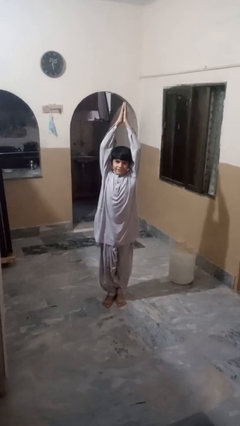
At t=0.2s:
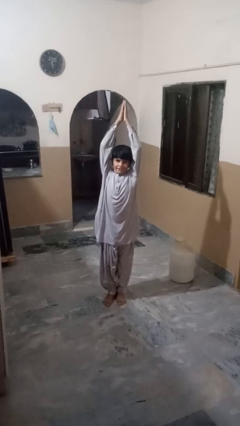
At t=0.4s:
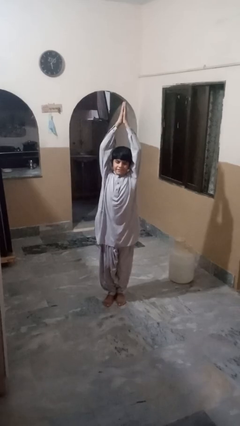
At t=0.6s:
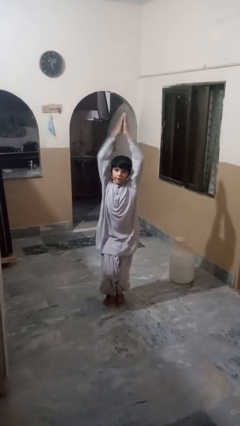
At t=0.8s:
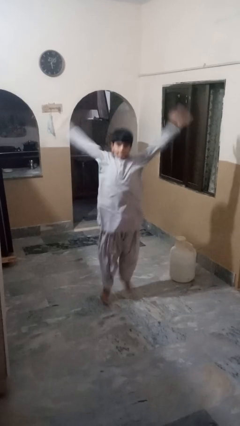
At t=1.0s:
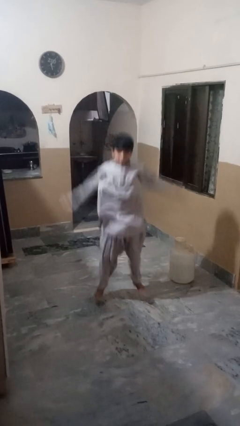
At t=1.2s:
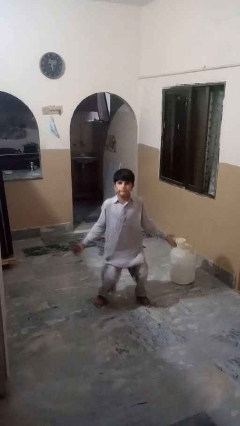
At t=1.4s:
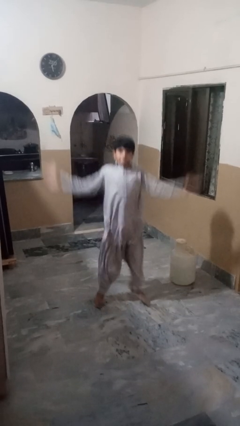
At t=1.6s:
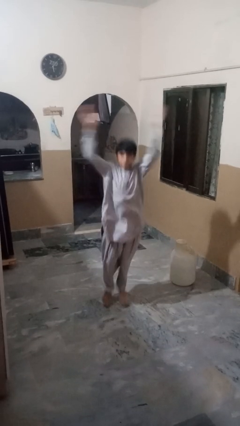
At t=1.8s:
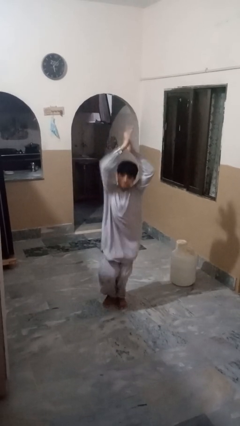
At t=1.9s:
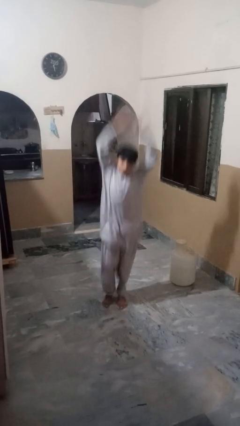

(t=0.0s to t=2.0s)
person exercises with jumping jacks

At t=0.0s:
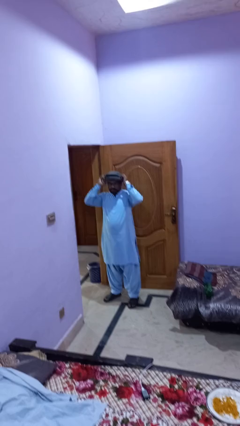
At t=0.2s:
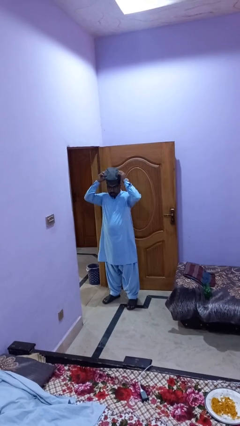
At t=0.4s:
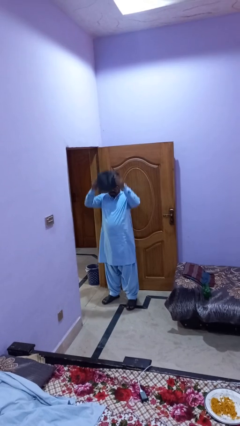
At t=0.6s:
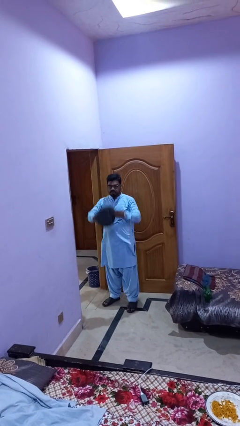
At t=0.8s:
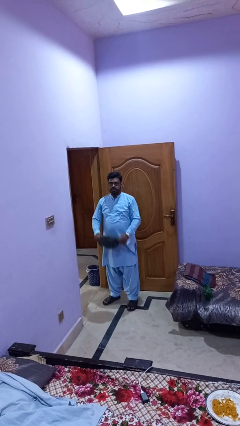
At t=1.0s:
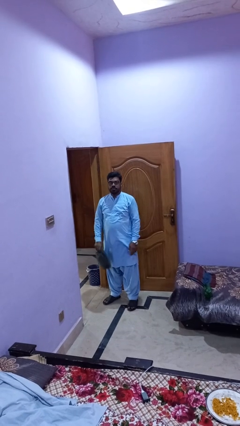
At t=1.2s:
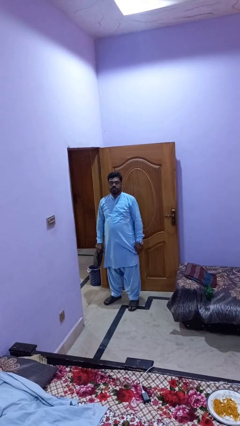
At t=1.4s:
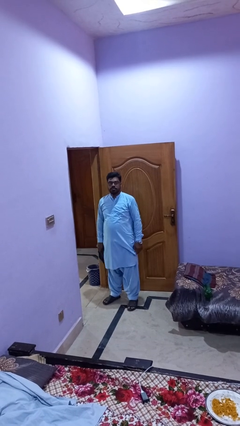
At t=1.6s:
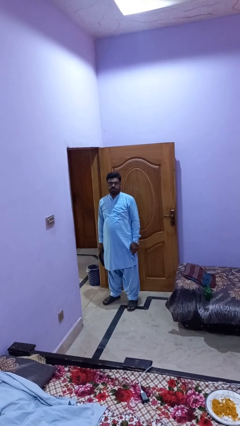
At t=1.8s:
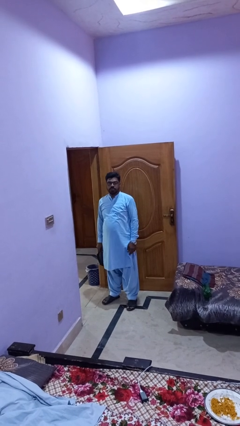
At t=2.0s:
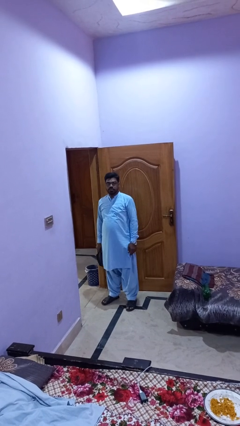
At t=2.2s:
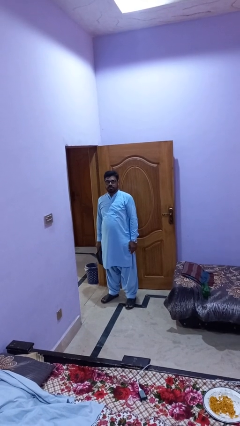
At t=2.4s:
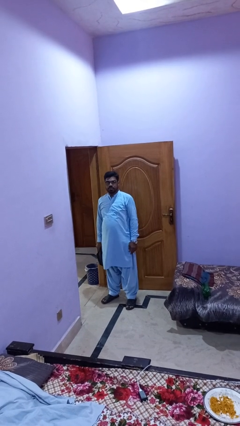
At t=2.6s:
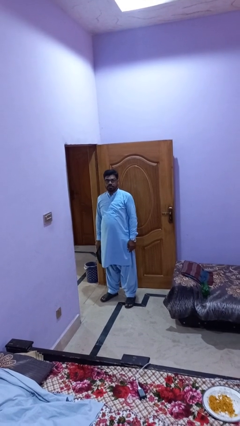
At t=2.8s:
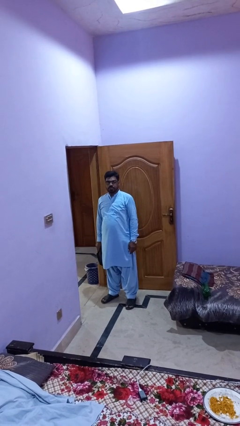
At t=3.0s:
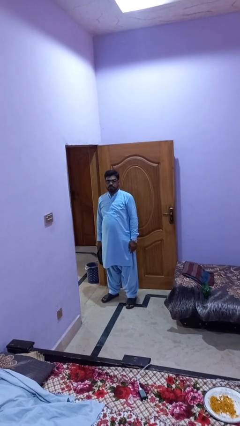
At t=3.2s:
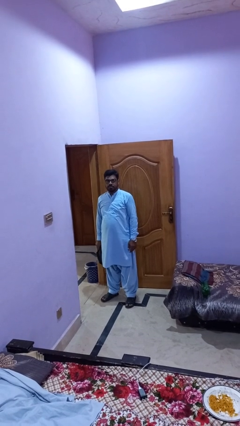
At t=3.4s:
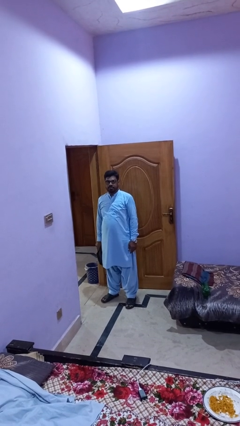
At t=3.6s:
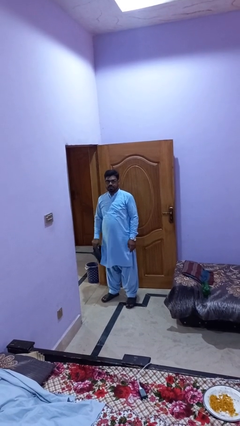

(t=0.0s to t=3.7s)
person takes off hat

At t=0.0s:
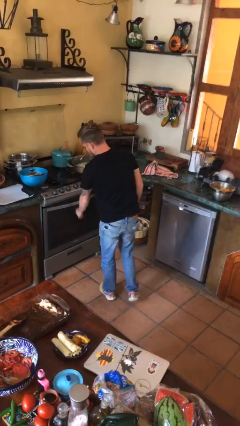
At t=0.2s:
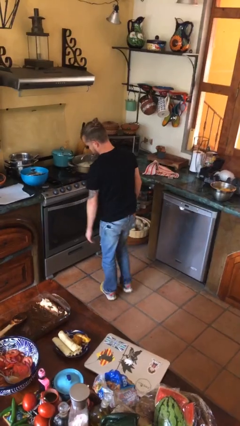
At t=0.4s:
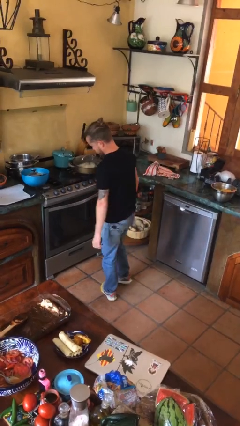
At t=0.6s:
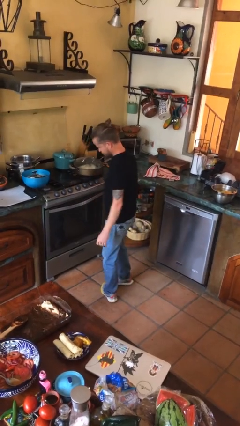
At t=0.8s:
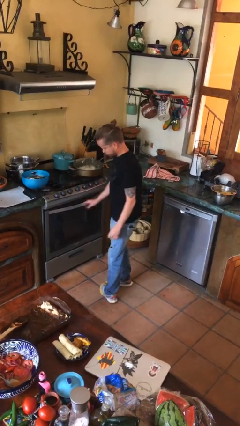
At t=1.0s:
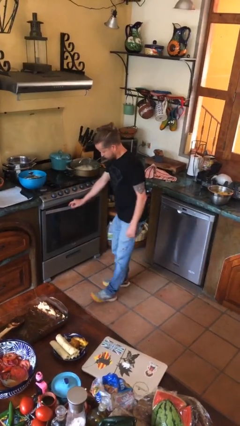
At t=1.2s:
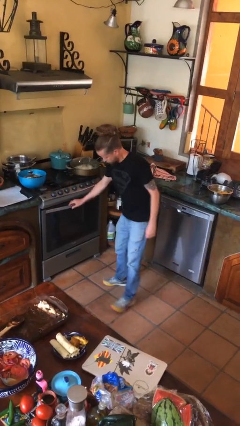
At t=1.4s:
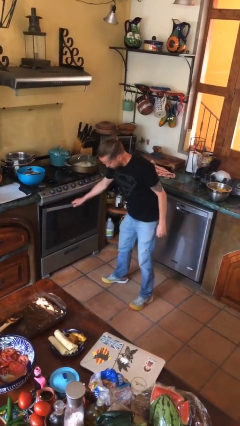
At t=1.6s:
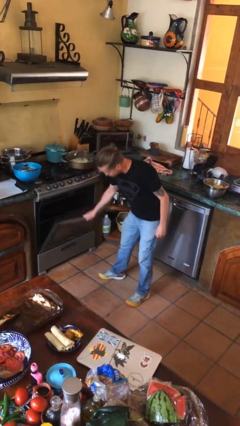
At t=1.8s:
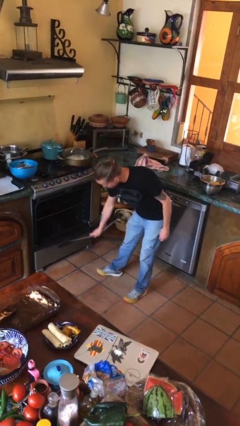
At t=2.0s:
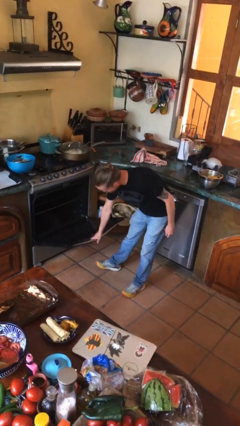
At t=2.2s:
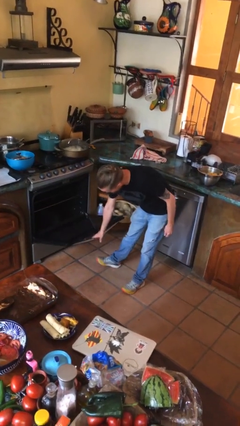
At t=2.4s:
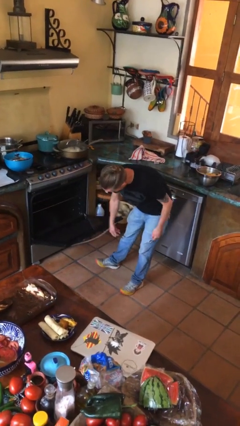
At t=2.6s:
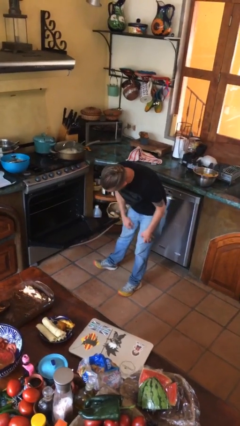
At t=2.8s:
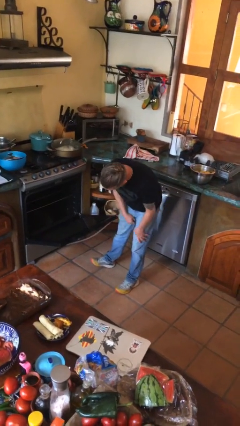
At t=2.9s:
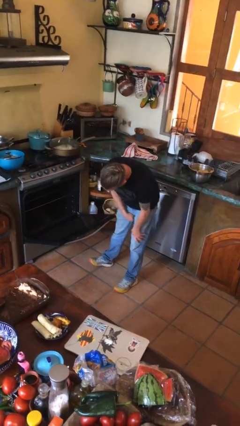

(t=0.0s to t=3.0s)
person opens oven door

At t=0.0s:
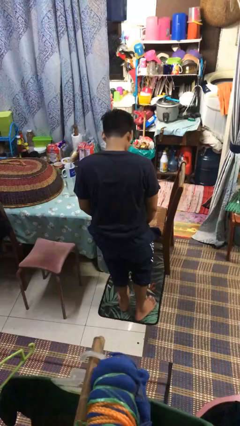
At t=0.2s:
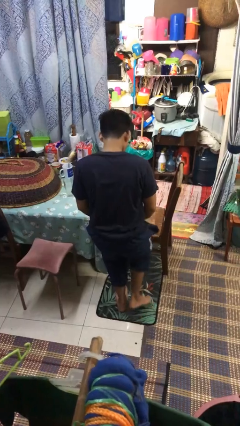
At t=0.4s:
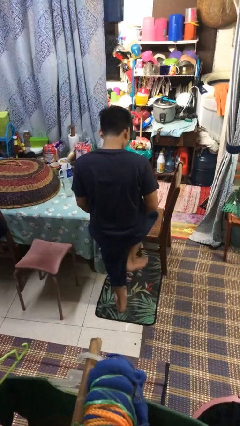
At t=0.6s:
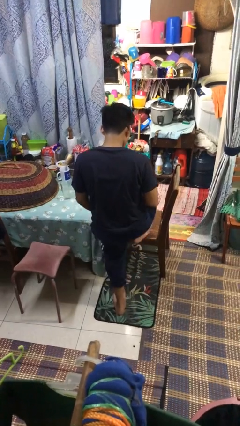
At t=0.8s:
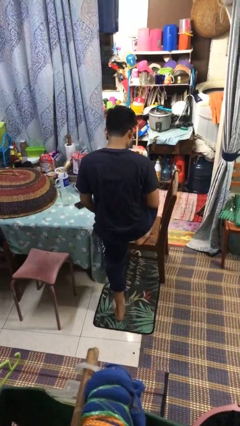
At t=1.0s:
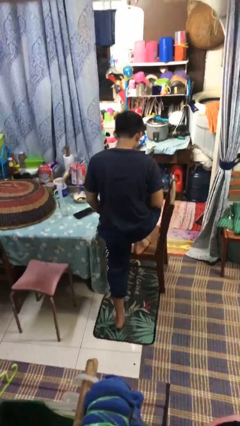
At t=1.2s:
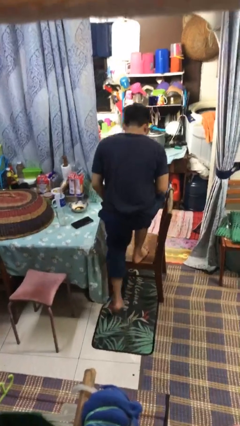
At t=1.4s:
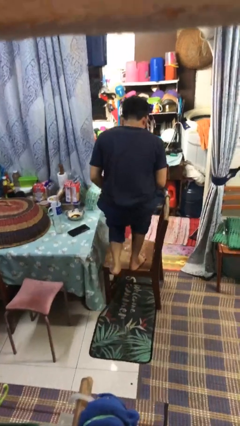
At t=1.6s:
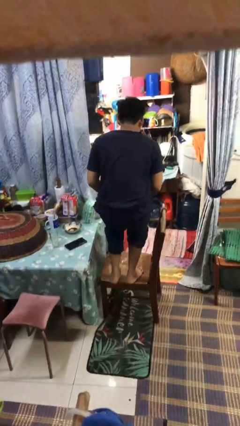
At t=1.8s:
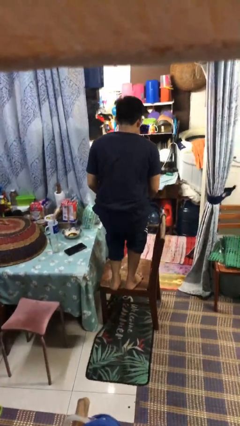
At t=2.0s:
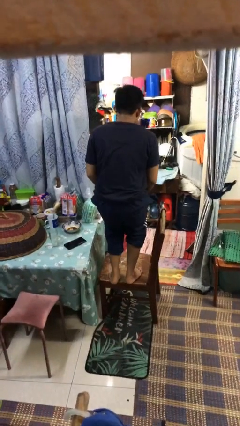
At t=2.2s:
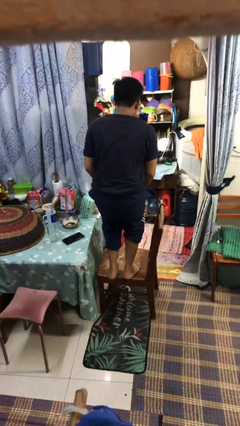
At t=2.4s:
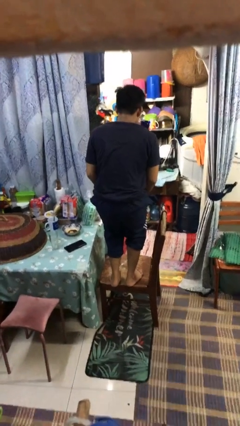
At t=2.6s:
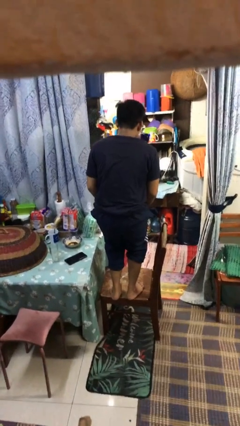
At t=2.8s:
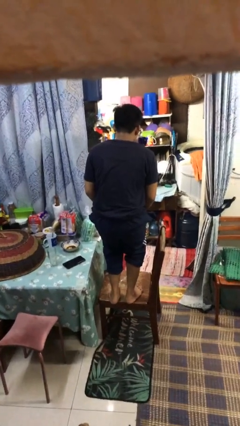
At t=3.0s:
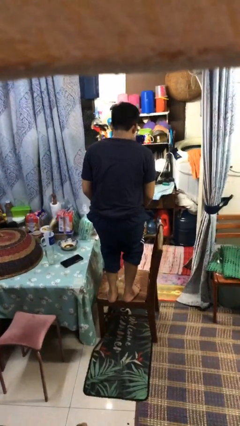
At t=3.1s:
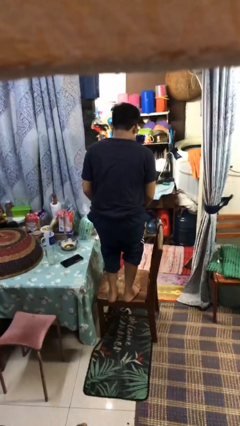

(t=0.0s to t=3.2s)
person climbs on chair

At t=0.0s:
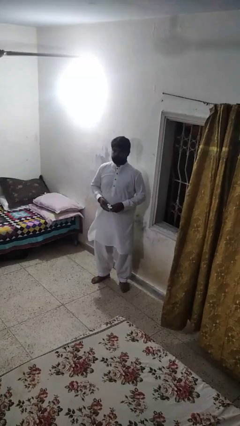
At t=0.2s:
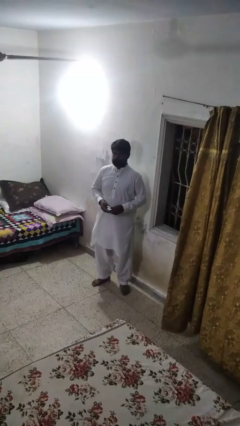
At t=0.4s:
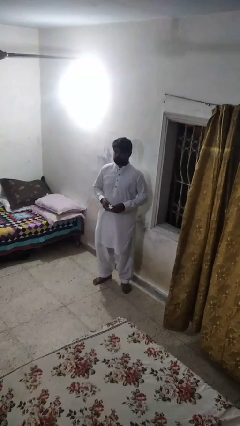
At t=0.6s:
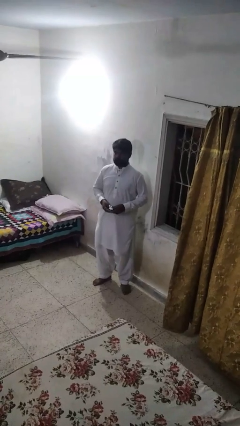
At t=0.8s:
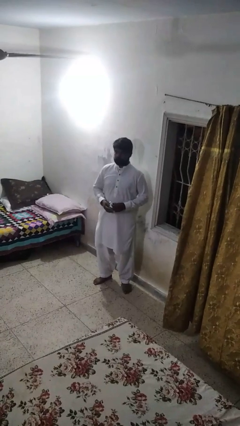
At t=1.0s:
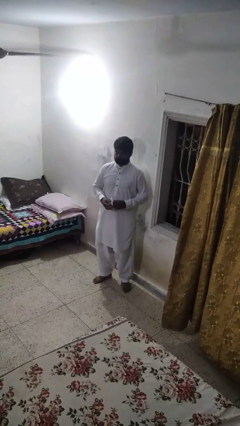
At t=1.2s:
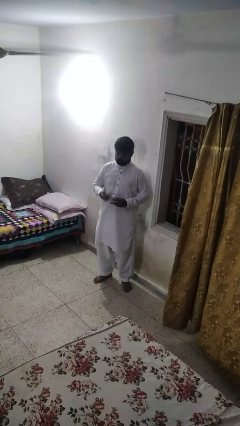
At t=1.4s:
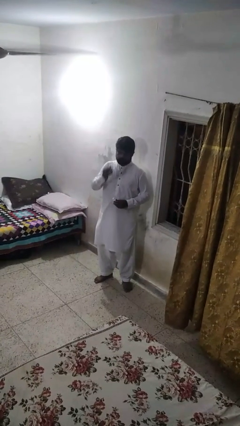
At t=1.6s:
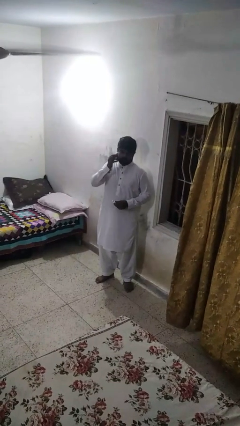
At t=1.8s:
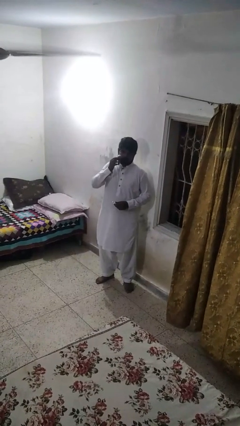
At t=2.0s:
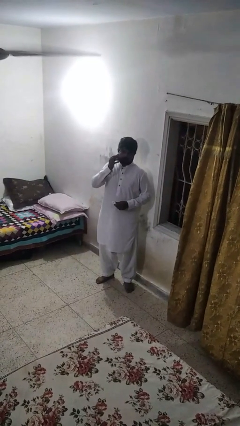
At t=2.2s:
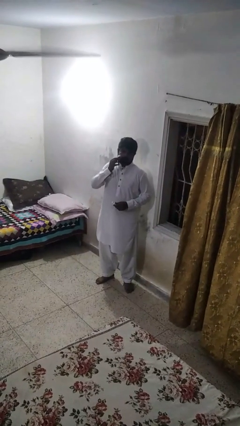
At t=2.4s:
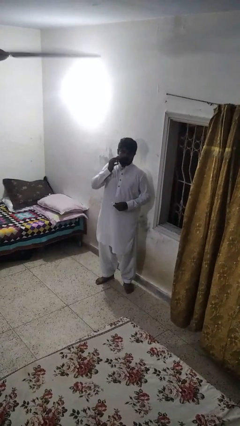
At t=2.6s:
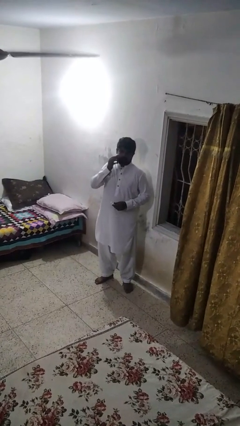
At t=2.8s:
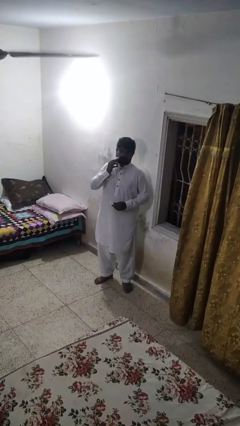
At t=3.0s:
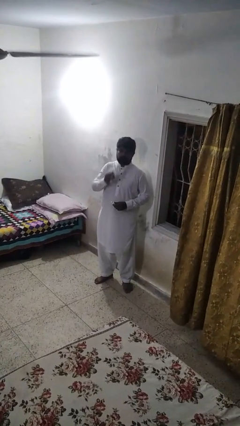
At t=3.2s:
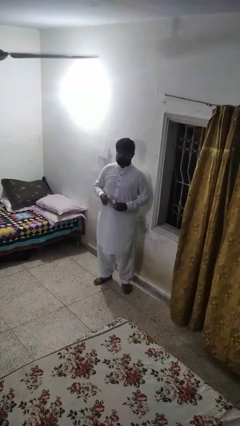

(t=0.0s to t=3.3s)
person shaves face

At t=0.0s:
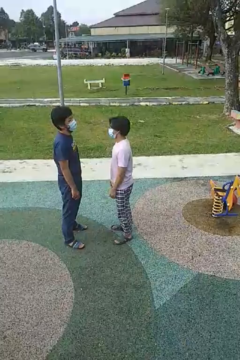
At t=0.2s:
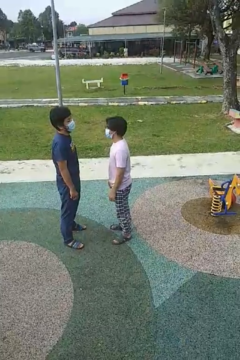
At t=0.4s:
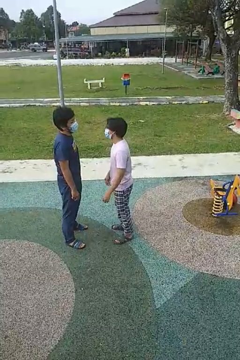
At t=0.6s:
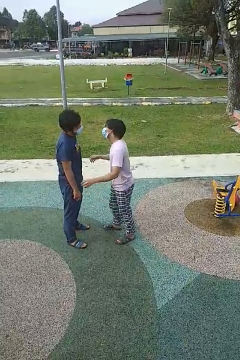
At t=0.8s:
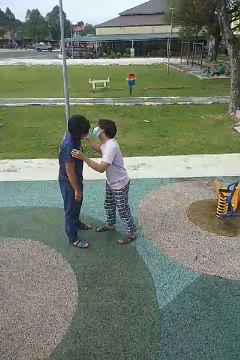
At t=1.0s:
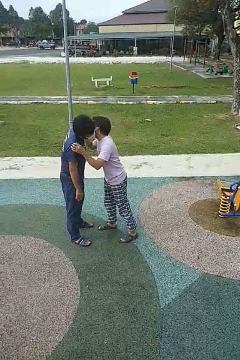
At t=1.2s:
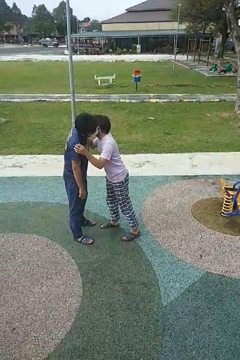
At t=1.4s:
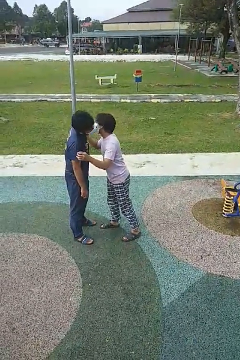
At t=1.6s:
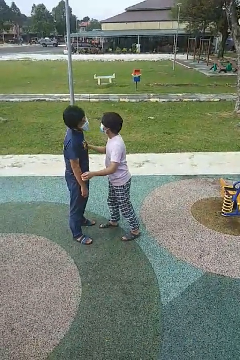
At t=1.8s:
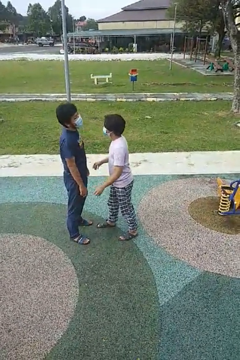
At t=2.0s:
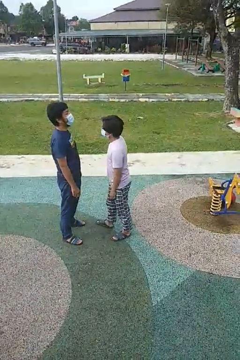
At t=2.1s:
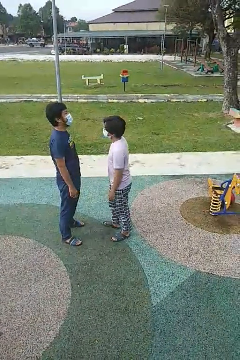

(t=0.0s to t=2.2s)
person kisses cheek of person

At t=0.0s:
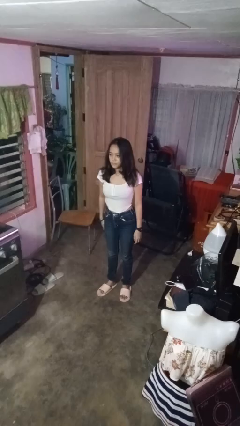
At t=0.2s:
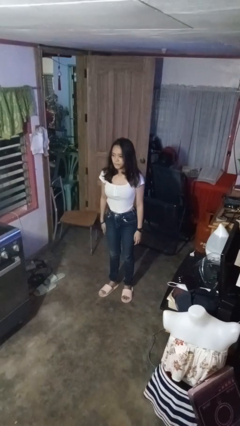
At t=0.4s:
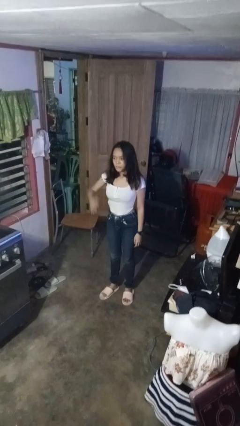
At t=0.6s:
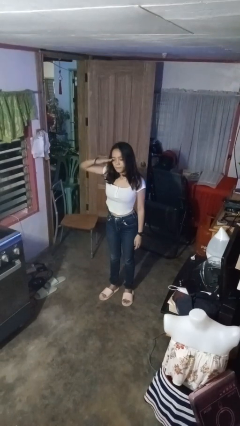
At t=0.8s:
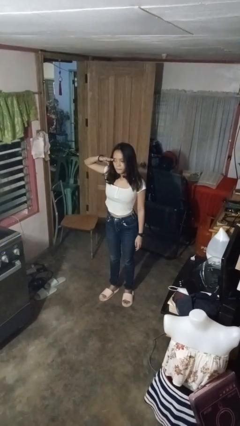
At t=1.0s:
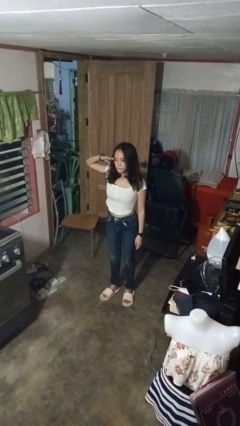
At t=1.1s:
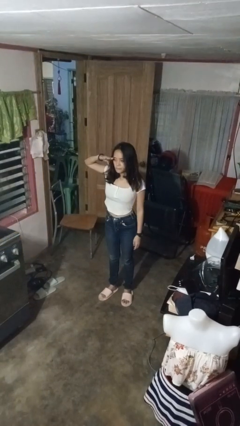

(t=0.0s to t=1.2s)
person salutes
